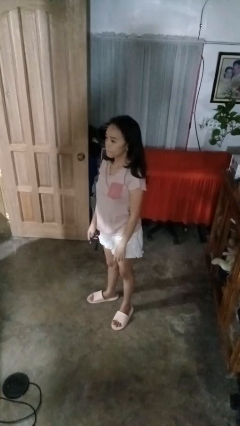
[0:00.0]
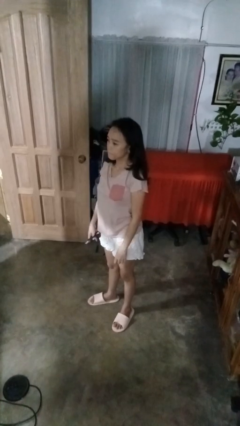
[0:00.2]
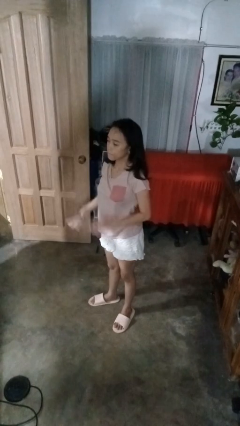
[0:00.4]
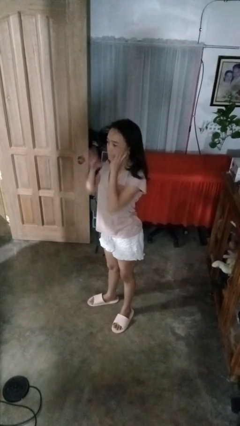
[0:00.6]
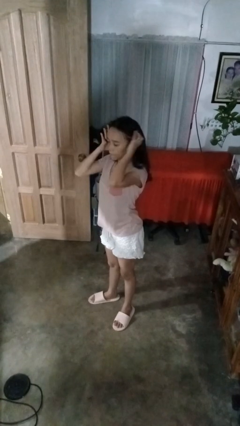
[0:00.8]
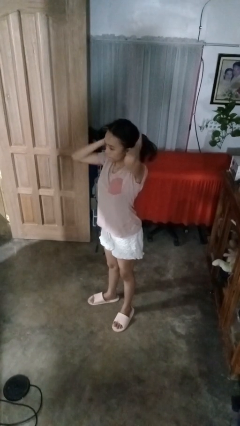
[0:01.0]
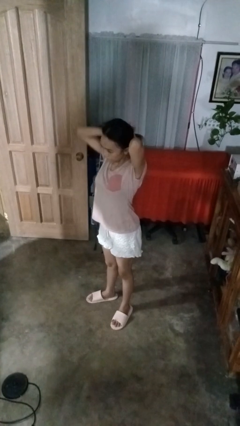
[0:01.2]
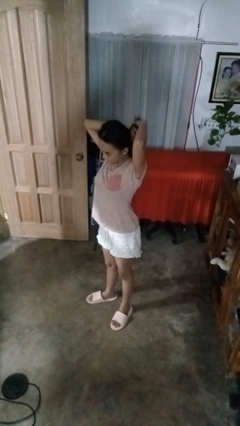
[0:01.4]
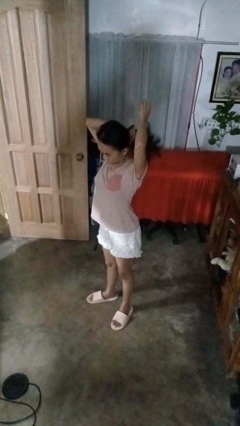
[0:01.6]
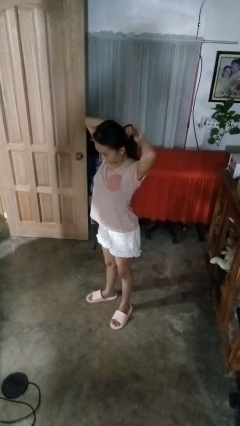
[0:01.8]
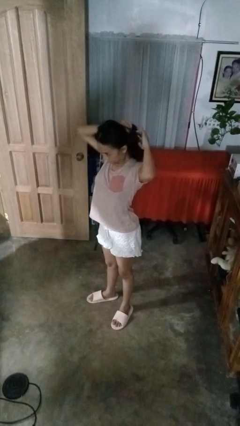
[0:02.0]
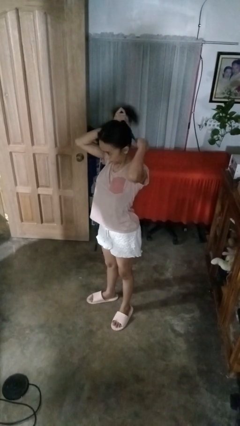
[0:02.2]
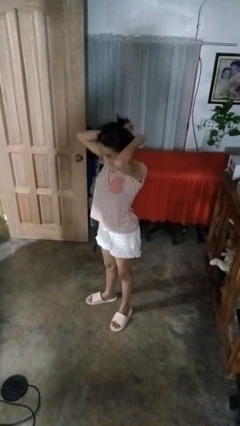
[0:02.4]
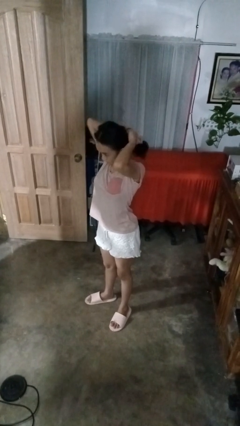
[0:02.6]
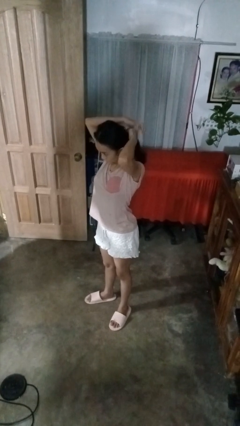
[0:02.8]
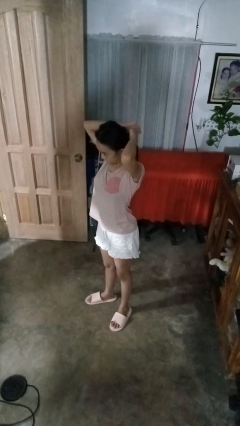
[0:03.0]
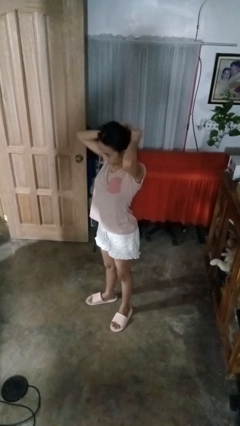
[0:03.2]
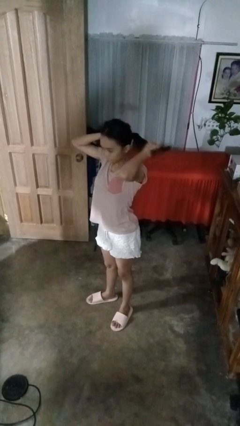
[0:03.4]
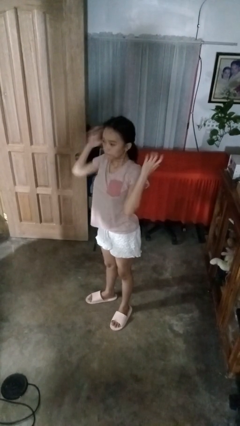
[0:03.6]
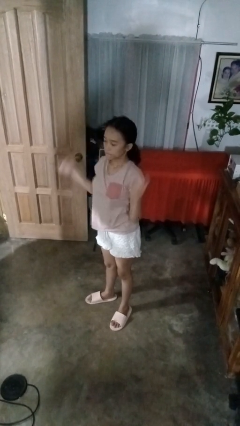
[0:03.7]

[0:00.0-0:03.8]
person puts hair in ponytail

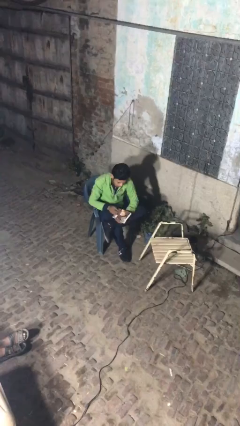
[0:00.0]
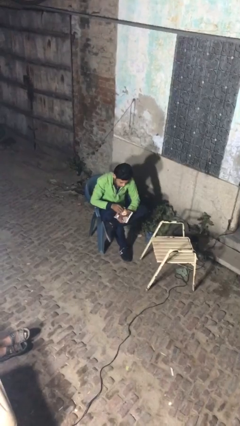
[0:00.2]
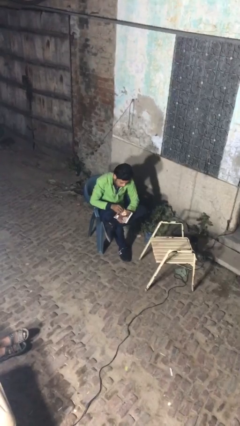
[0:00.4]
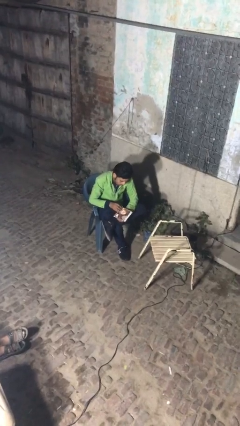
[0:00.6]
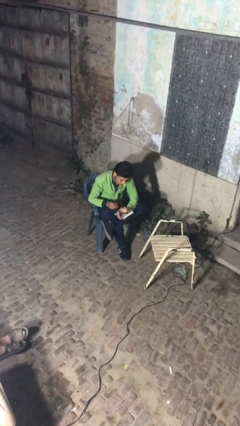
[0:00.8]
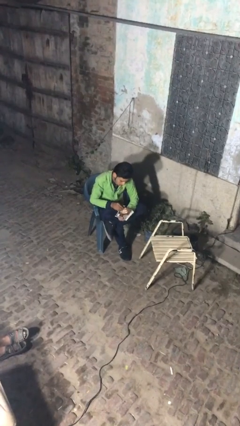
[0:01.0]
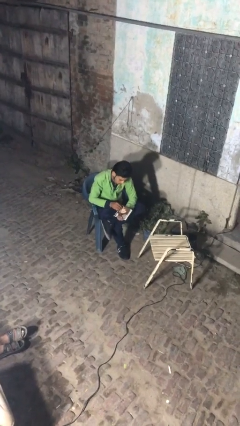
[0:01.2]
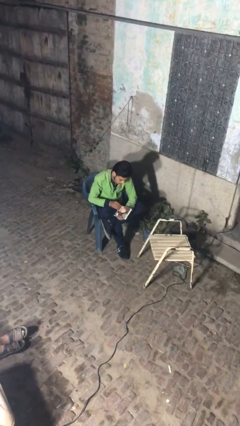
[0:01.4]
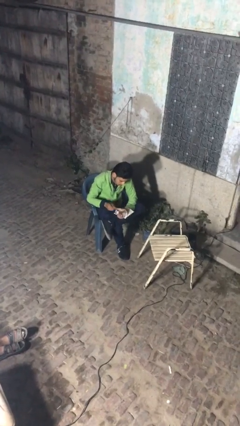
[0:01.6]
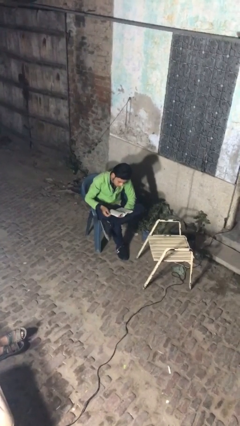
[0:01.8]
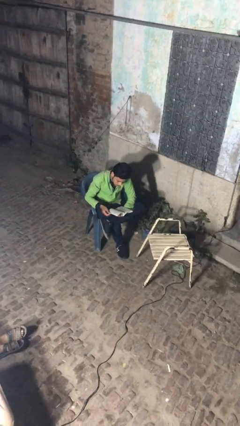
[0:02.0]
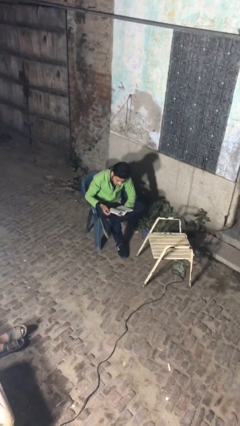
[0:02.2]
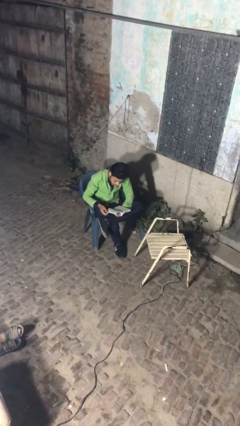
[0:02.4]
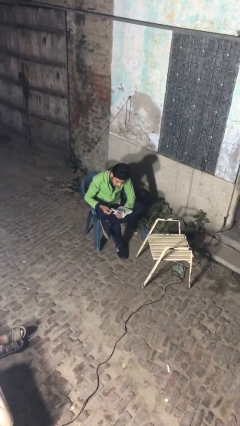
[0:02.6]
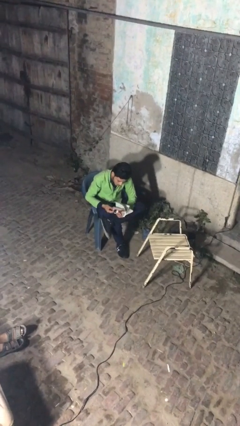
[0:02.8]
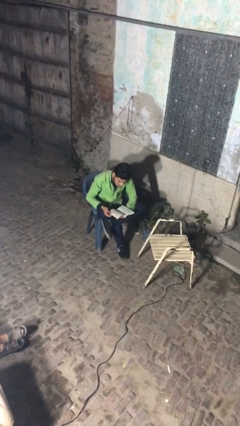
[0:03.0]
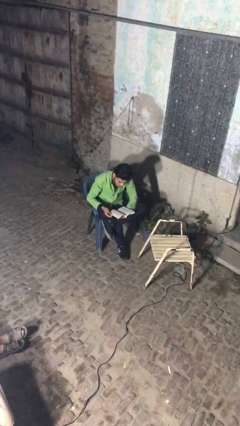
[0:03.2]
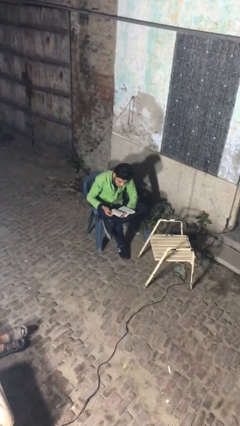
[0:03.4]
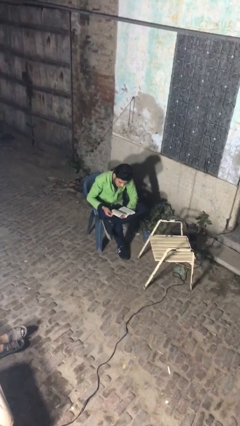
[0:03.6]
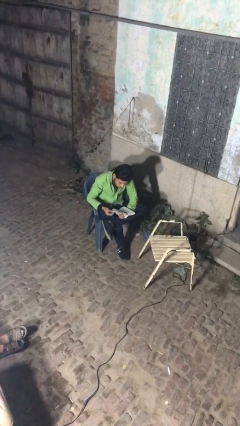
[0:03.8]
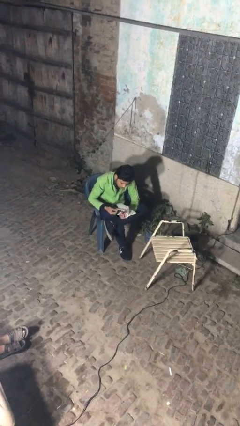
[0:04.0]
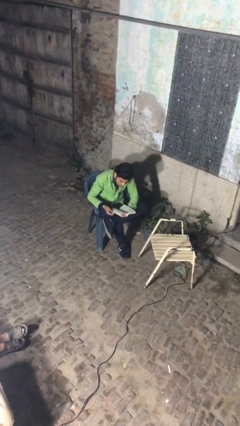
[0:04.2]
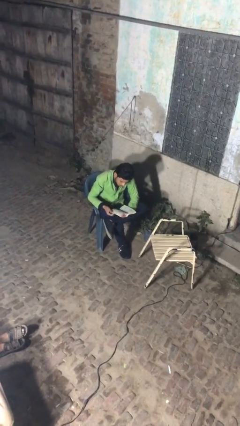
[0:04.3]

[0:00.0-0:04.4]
person reads document

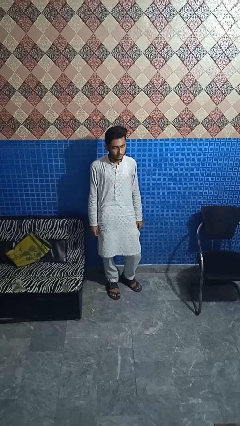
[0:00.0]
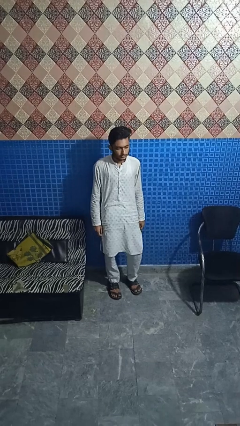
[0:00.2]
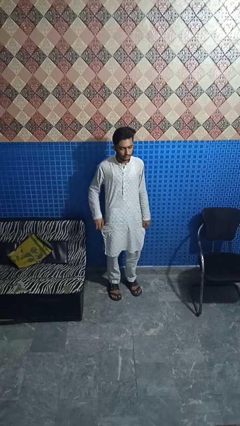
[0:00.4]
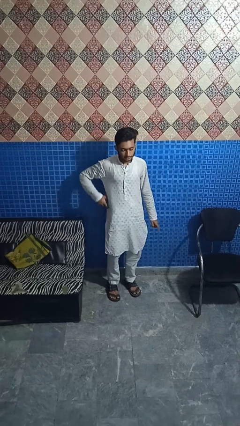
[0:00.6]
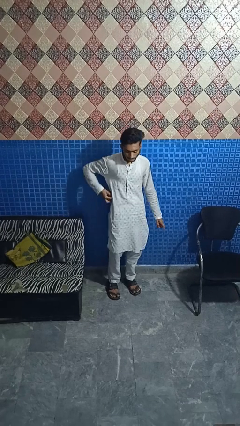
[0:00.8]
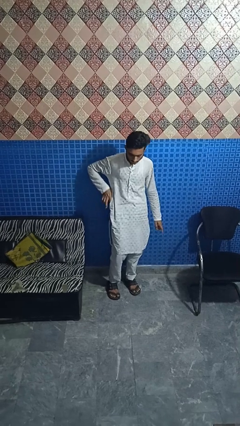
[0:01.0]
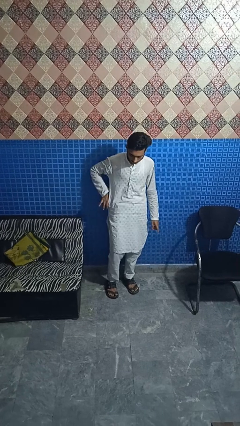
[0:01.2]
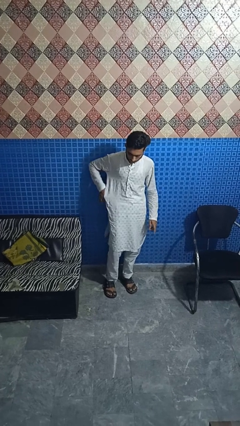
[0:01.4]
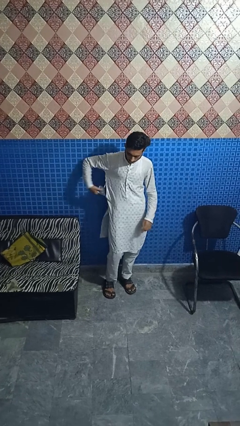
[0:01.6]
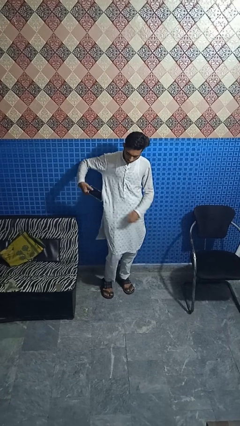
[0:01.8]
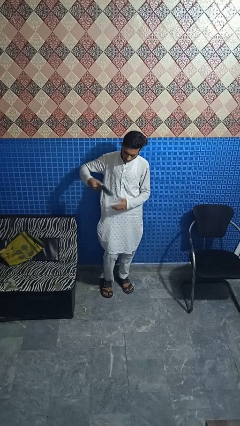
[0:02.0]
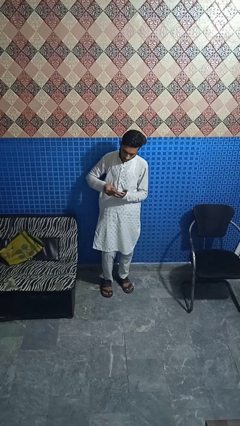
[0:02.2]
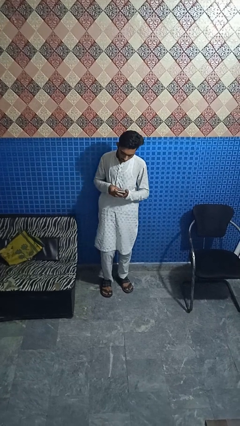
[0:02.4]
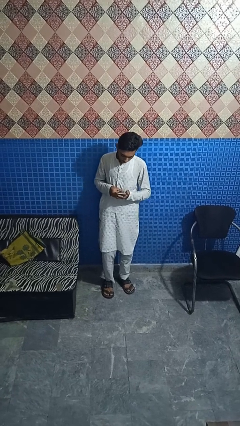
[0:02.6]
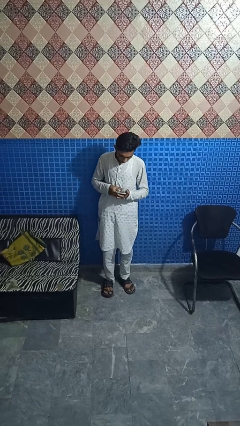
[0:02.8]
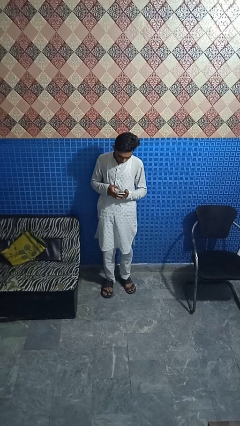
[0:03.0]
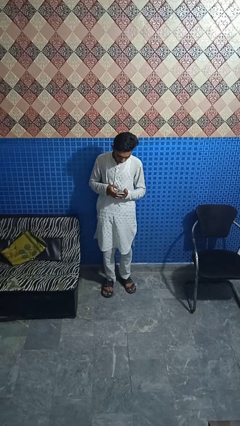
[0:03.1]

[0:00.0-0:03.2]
person takes phone from pocket

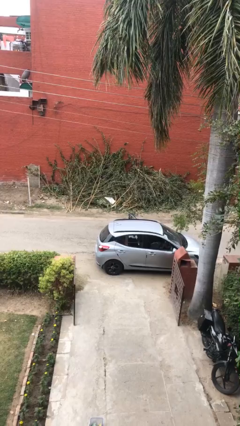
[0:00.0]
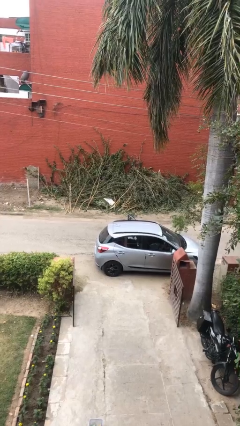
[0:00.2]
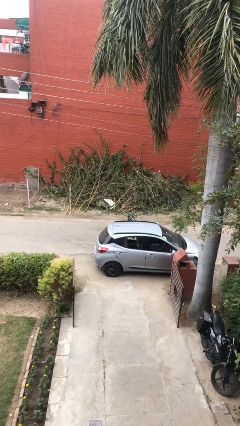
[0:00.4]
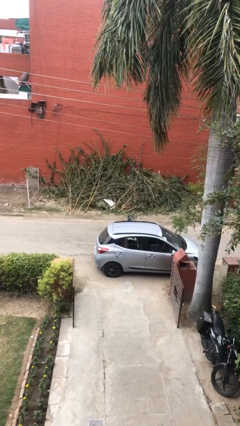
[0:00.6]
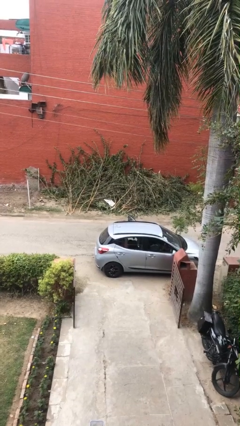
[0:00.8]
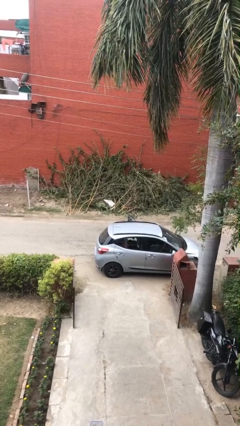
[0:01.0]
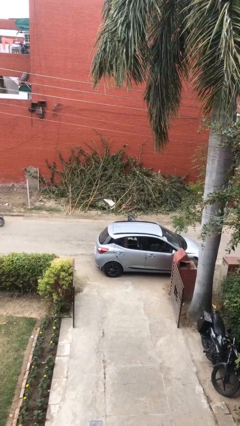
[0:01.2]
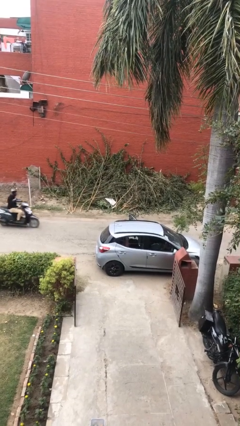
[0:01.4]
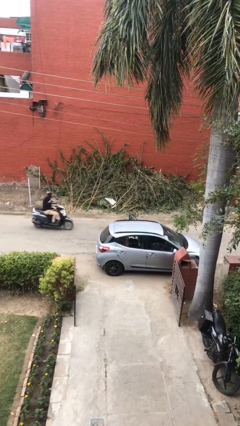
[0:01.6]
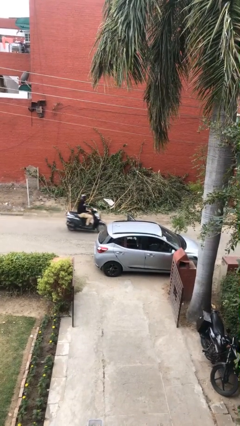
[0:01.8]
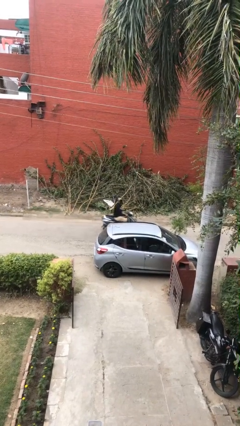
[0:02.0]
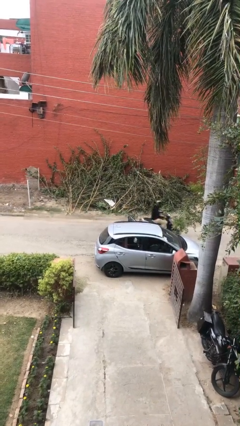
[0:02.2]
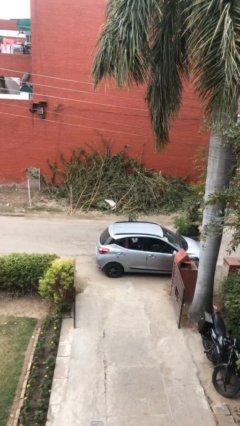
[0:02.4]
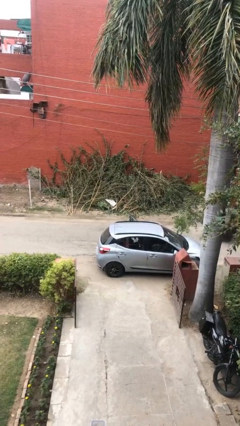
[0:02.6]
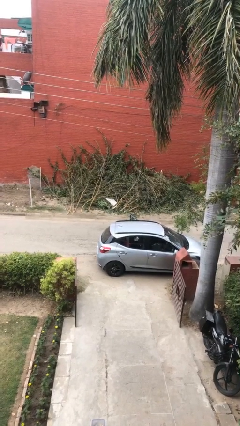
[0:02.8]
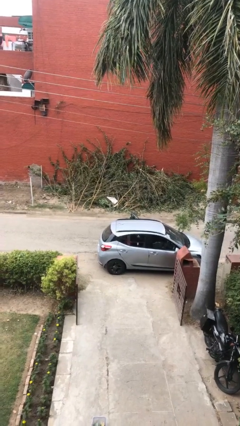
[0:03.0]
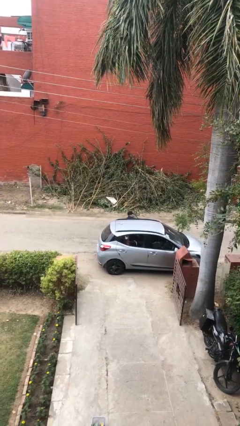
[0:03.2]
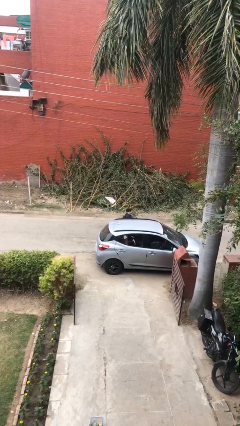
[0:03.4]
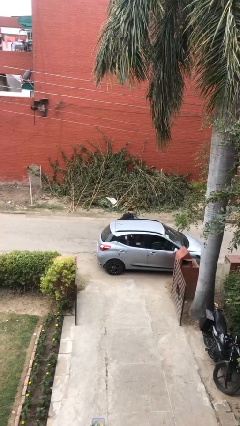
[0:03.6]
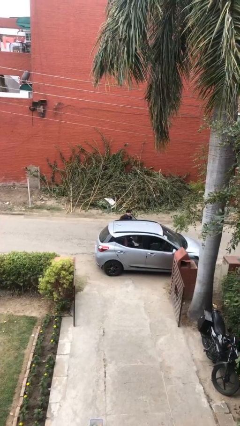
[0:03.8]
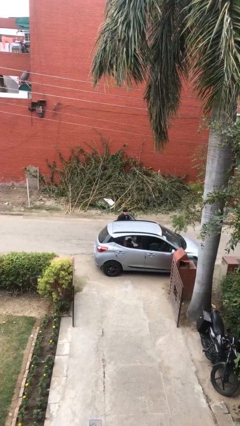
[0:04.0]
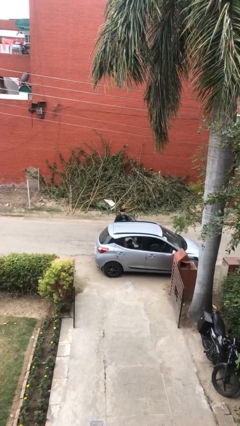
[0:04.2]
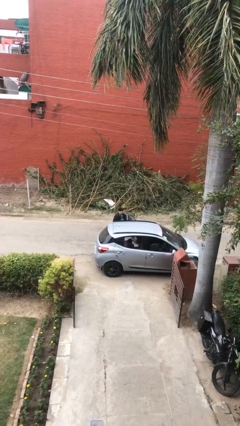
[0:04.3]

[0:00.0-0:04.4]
person exits car

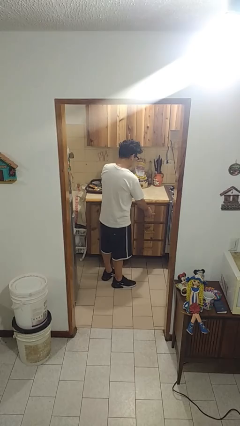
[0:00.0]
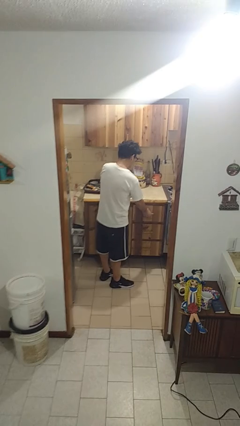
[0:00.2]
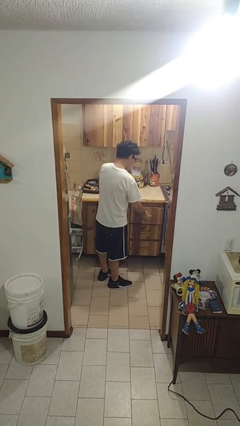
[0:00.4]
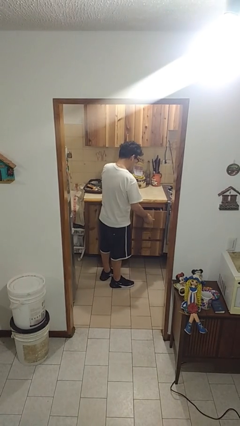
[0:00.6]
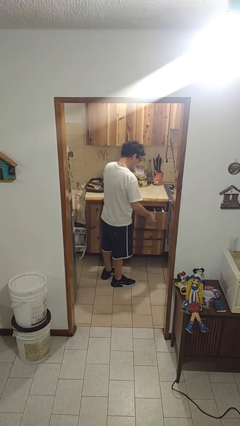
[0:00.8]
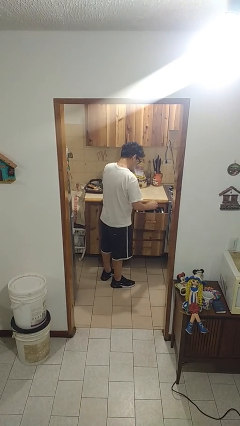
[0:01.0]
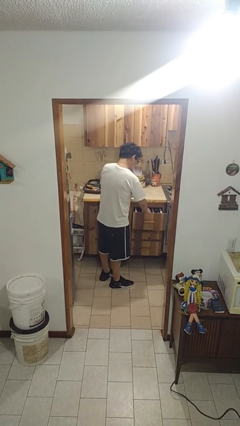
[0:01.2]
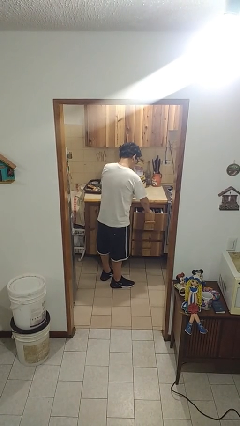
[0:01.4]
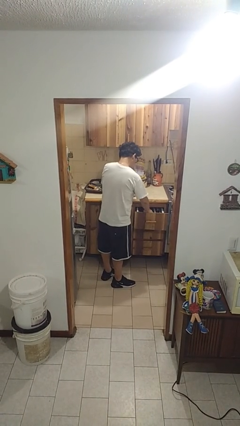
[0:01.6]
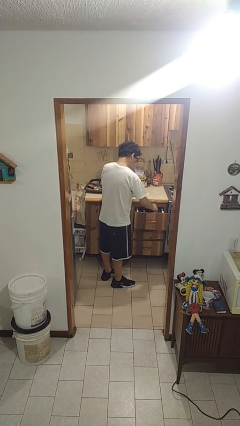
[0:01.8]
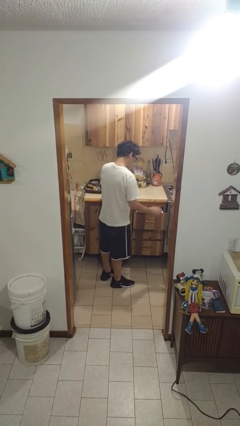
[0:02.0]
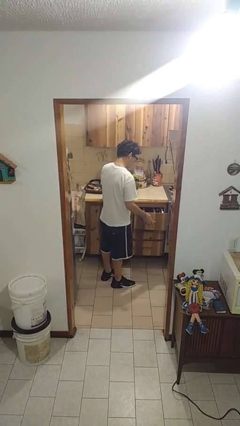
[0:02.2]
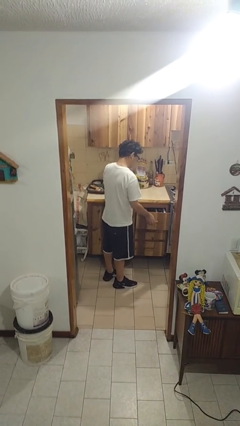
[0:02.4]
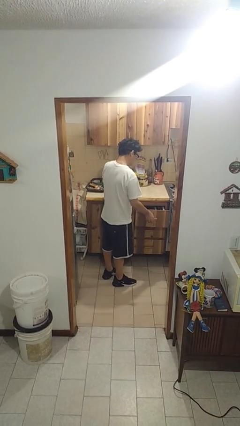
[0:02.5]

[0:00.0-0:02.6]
person searches in kitchen drawer
